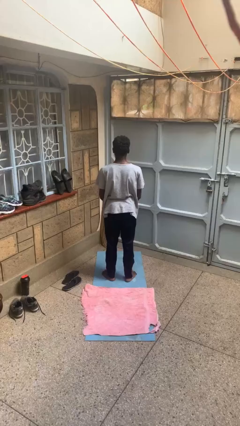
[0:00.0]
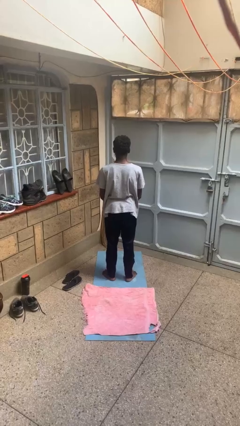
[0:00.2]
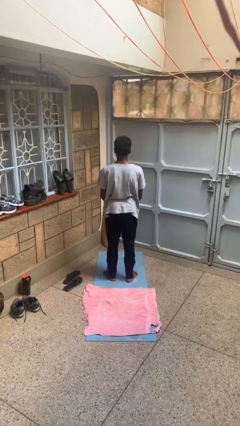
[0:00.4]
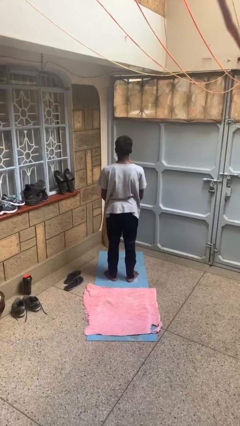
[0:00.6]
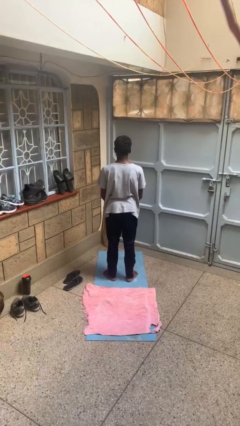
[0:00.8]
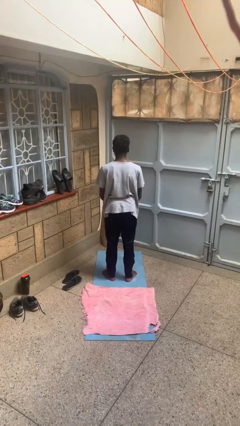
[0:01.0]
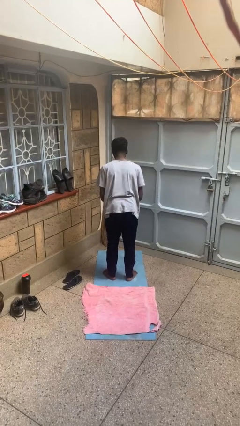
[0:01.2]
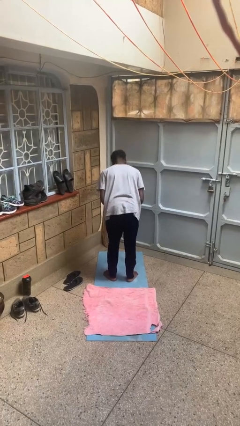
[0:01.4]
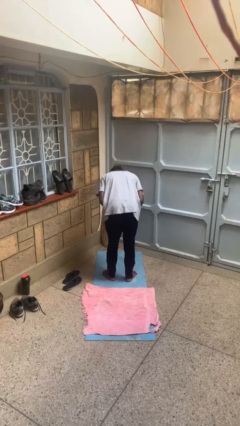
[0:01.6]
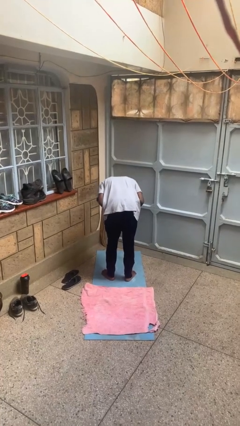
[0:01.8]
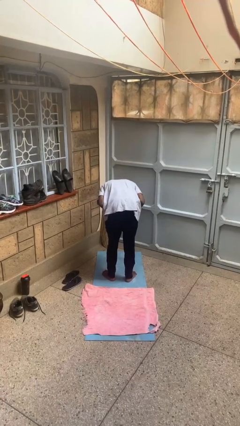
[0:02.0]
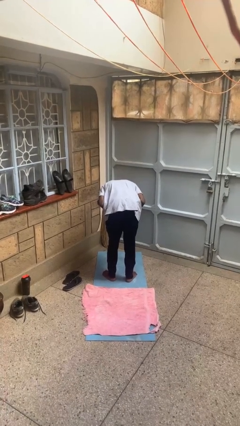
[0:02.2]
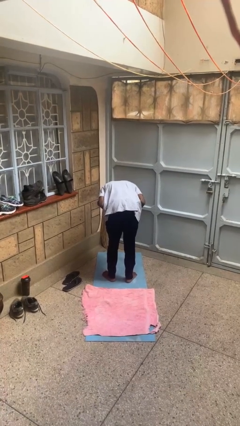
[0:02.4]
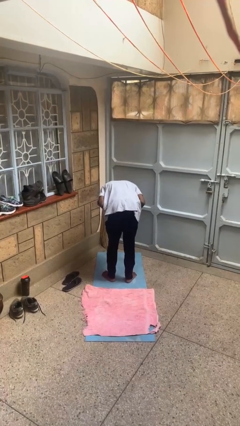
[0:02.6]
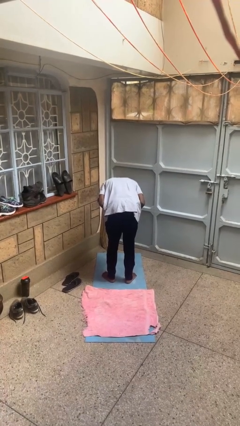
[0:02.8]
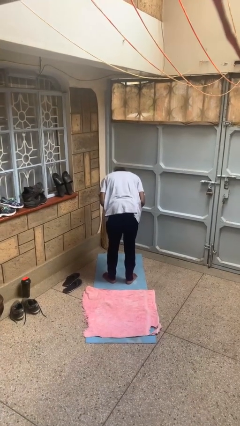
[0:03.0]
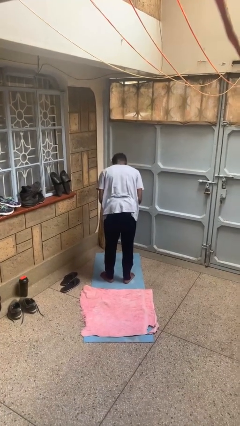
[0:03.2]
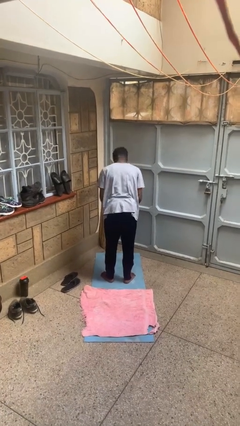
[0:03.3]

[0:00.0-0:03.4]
person bows

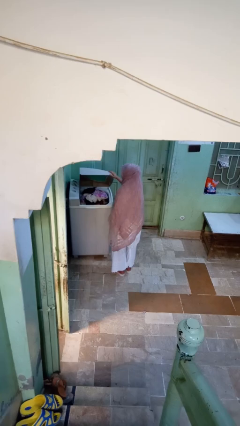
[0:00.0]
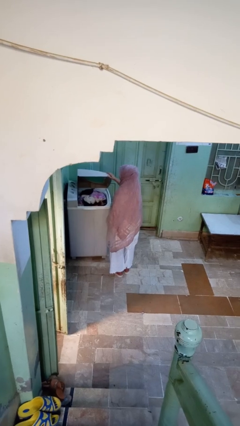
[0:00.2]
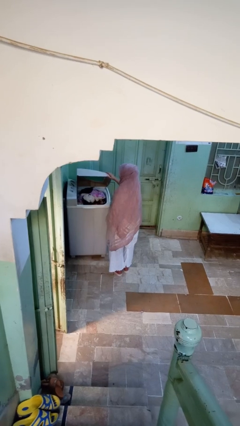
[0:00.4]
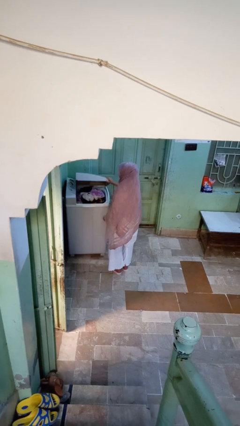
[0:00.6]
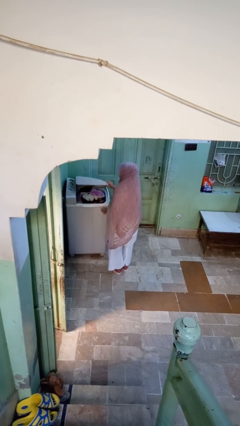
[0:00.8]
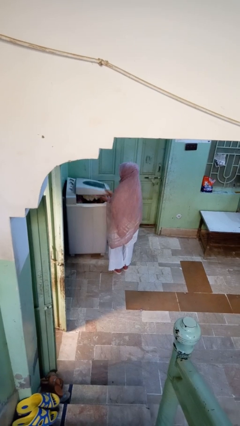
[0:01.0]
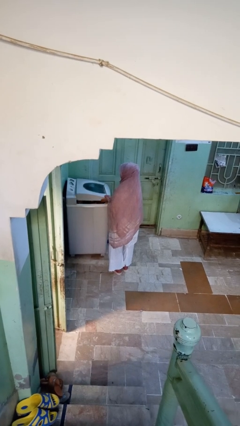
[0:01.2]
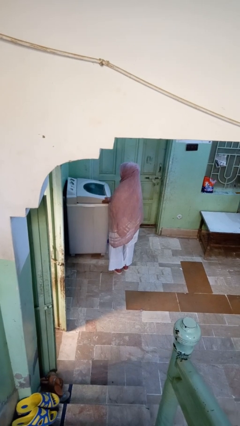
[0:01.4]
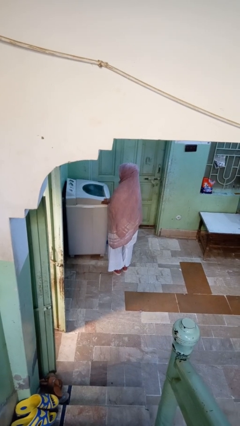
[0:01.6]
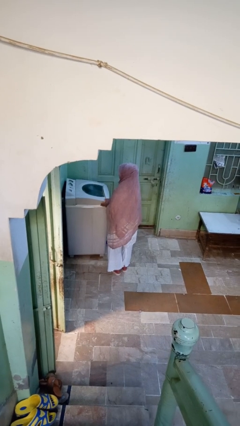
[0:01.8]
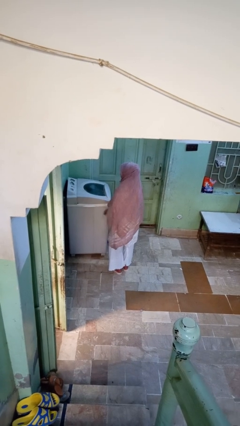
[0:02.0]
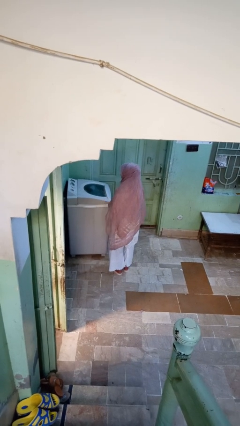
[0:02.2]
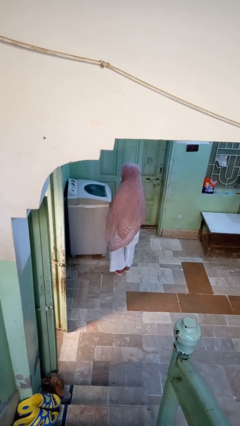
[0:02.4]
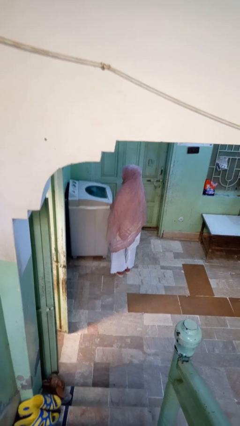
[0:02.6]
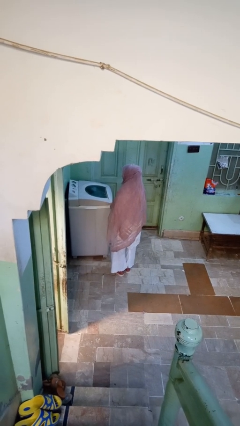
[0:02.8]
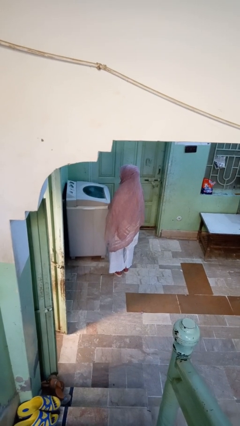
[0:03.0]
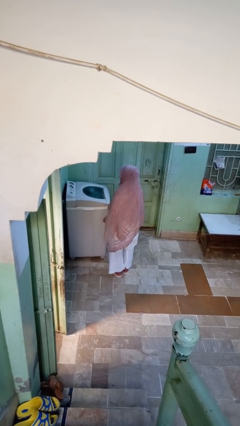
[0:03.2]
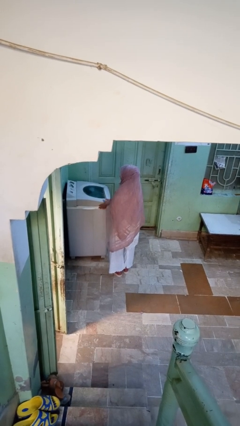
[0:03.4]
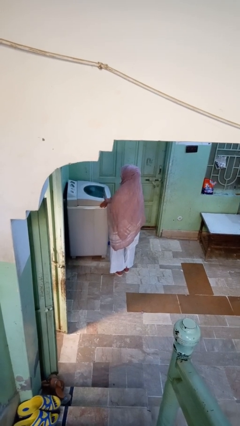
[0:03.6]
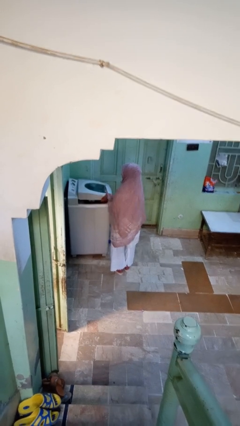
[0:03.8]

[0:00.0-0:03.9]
person closes clothes washer

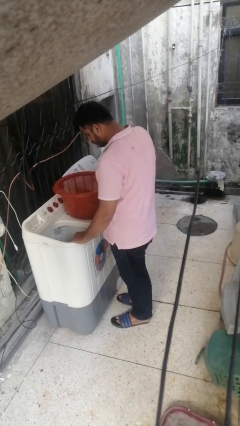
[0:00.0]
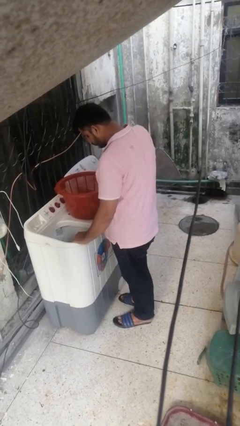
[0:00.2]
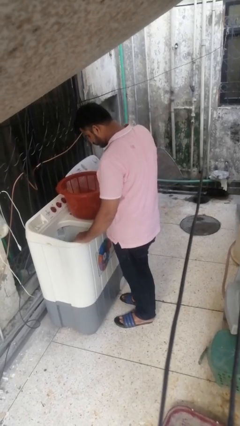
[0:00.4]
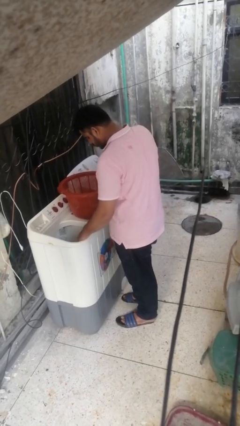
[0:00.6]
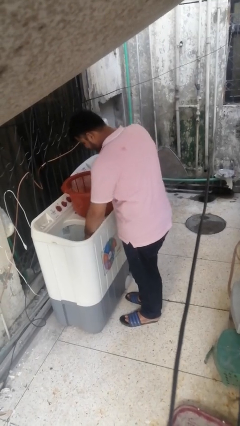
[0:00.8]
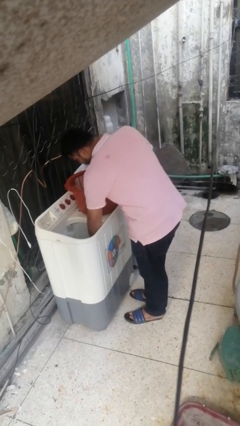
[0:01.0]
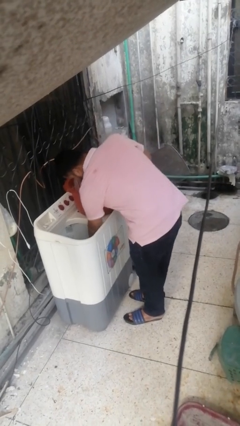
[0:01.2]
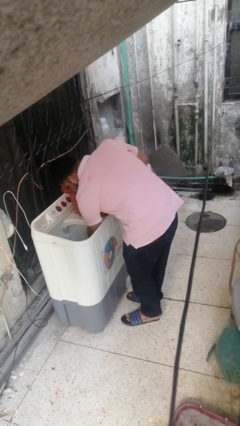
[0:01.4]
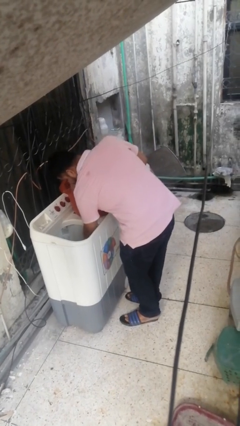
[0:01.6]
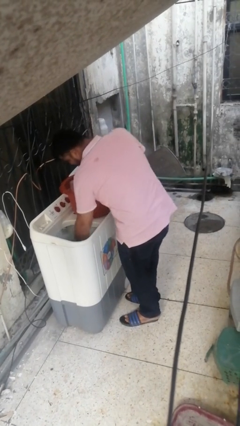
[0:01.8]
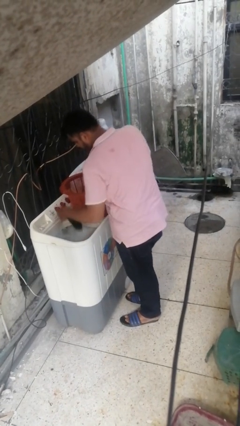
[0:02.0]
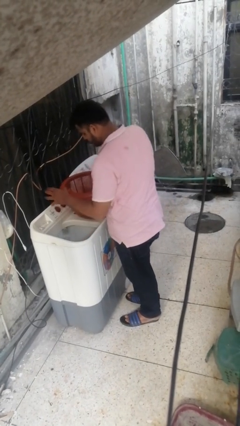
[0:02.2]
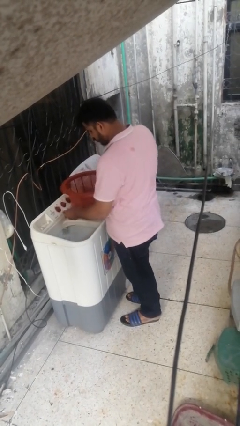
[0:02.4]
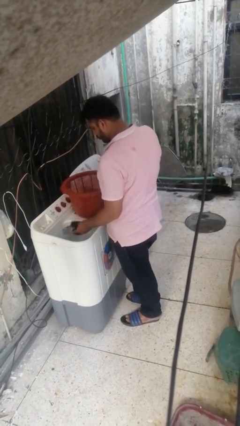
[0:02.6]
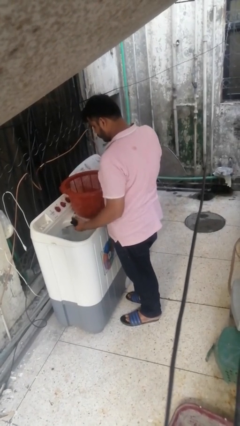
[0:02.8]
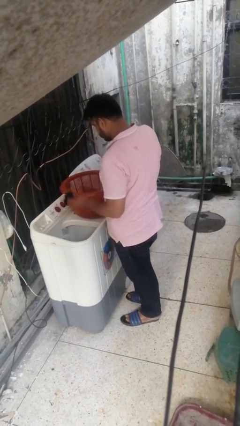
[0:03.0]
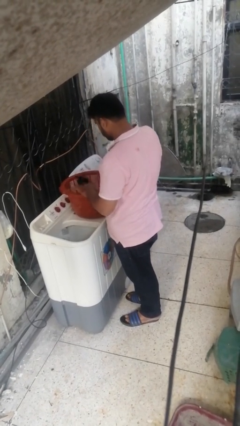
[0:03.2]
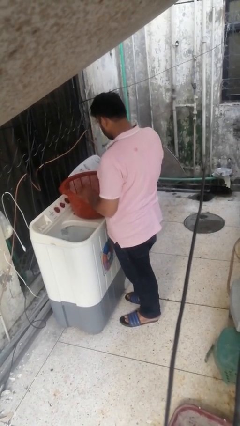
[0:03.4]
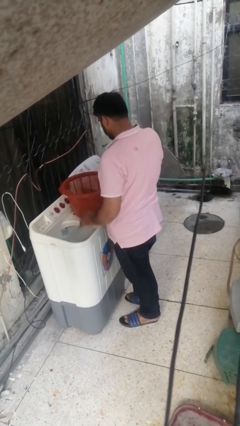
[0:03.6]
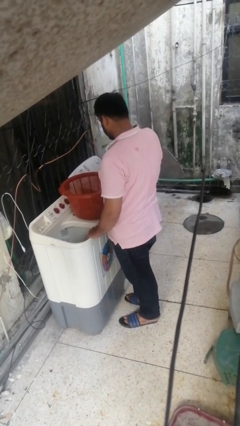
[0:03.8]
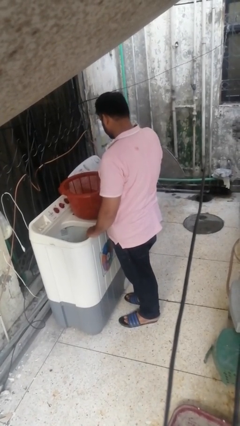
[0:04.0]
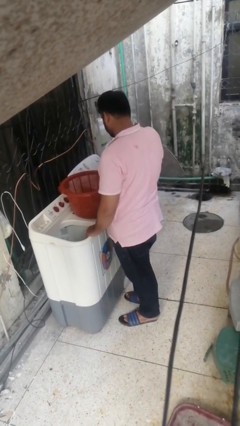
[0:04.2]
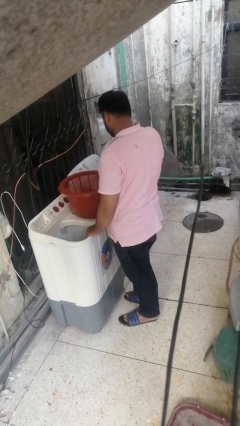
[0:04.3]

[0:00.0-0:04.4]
person unloads clotheswasher

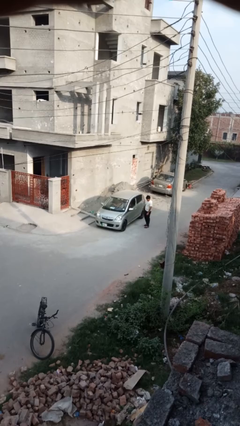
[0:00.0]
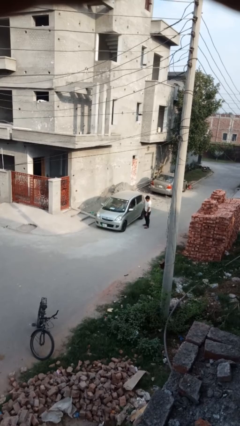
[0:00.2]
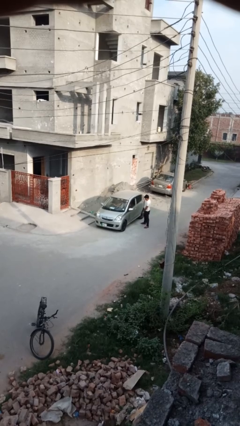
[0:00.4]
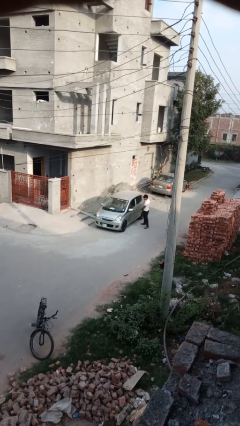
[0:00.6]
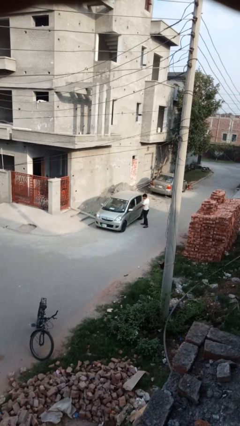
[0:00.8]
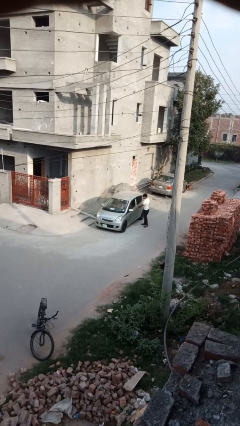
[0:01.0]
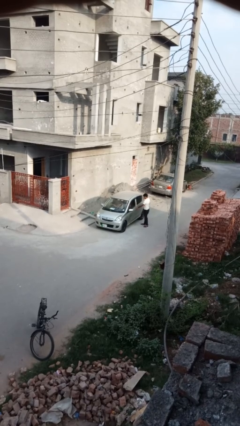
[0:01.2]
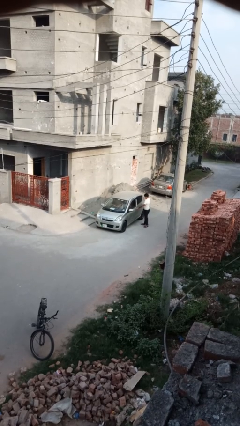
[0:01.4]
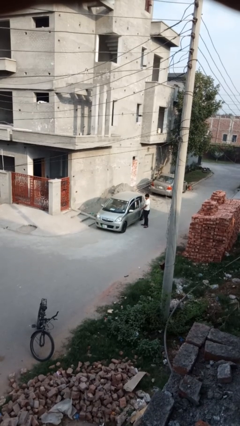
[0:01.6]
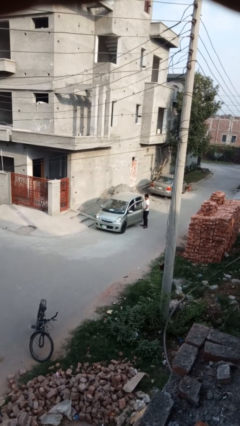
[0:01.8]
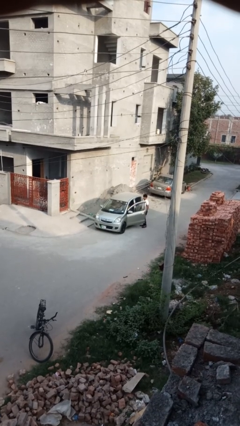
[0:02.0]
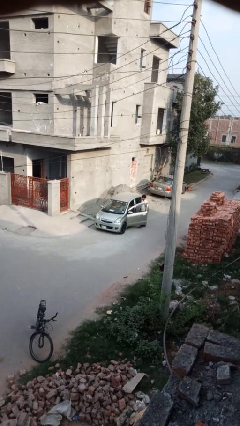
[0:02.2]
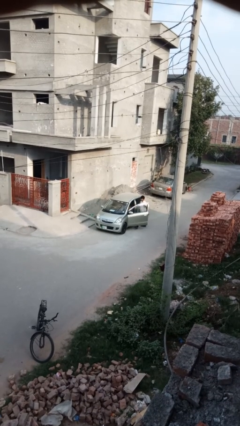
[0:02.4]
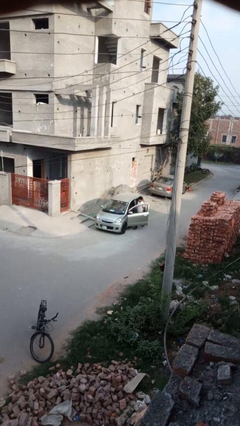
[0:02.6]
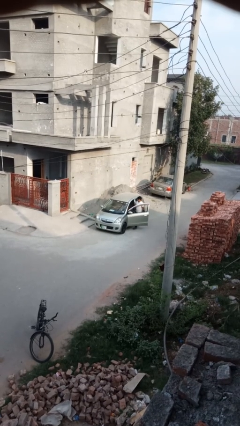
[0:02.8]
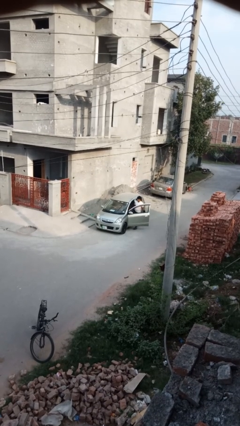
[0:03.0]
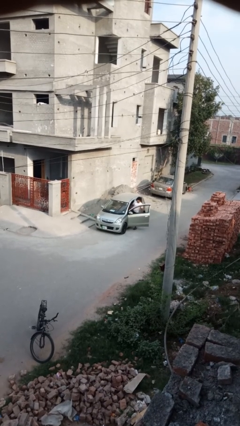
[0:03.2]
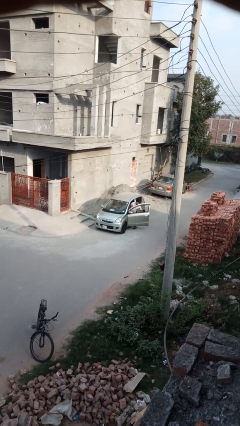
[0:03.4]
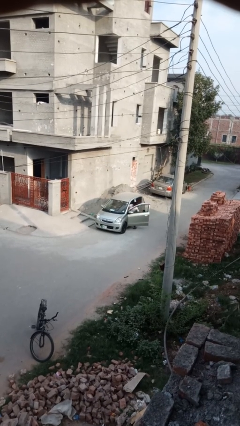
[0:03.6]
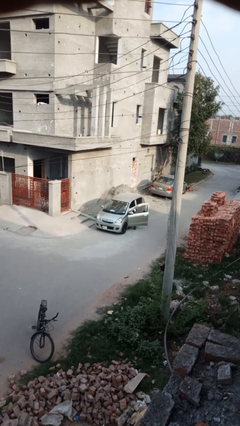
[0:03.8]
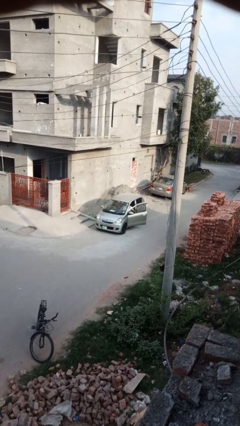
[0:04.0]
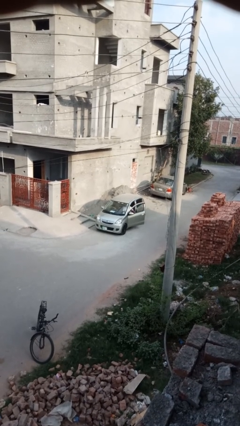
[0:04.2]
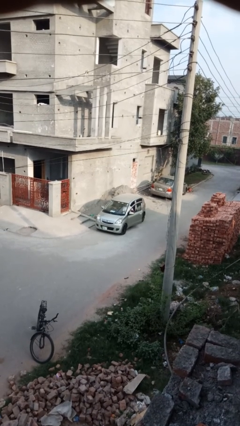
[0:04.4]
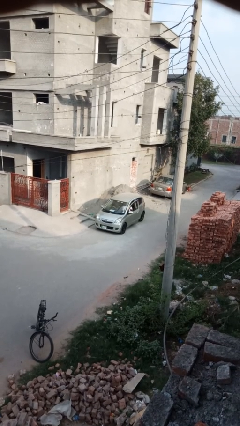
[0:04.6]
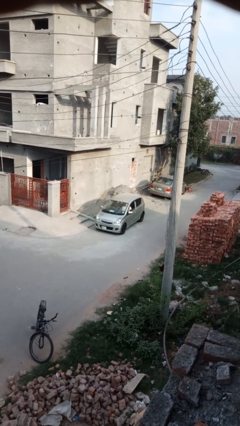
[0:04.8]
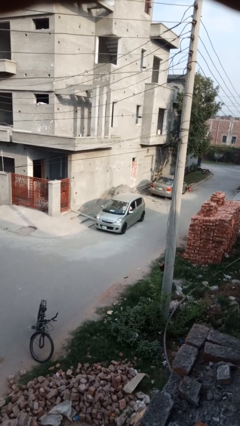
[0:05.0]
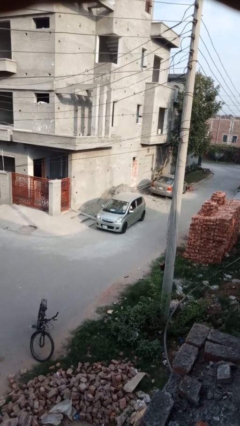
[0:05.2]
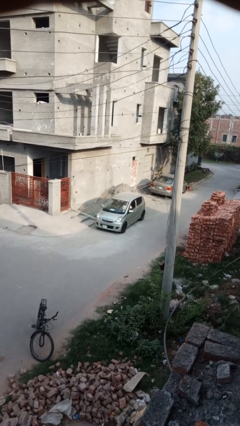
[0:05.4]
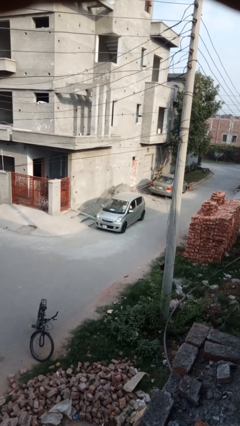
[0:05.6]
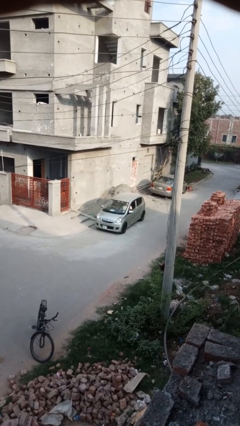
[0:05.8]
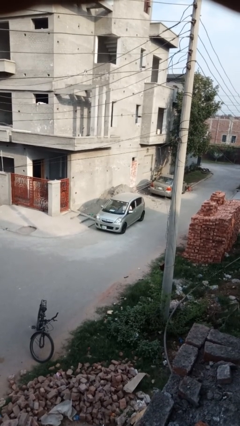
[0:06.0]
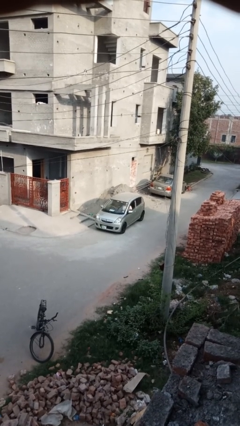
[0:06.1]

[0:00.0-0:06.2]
car picks up person
